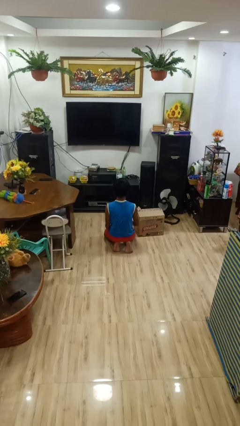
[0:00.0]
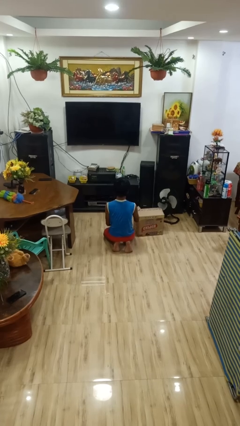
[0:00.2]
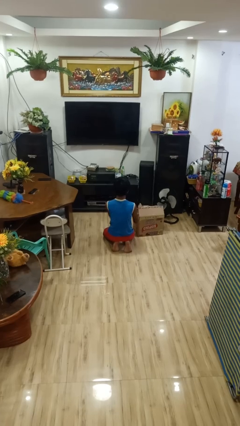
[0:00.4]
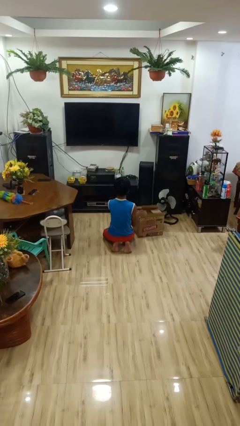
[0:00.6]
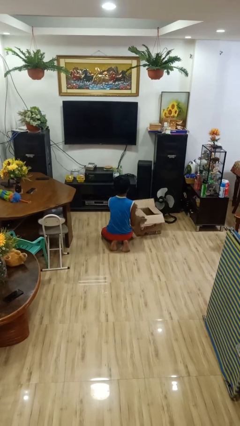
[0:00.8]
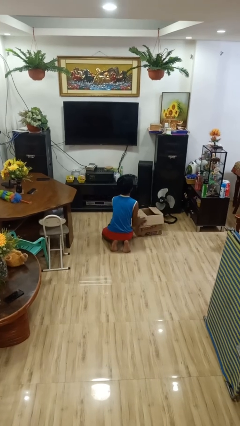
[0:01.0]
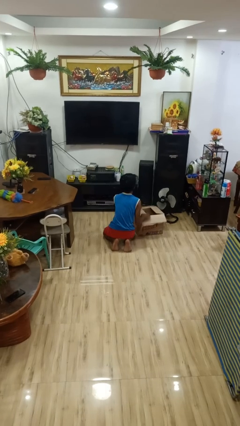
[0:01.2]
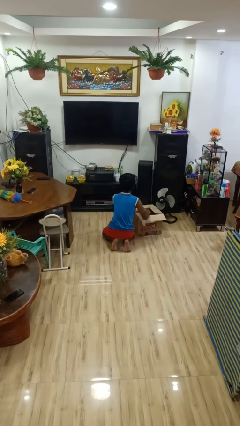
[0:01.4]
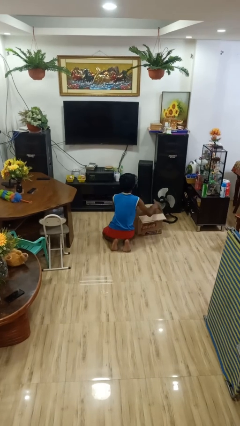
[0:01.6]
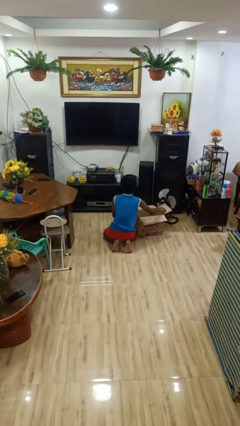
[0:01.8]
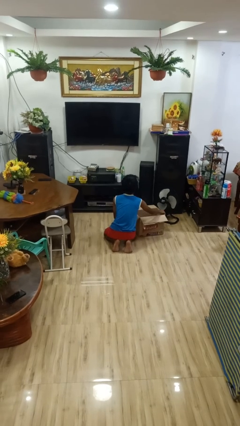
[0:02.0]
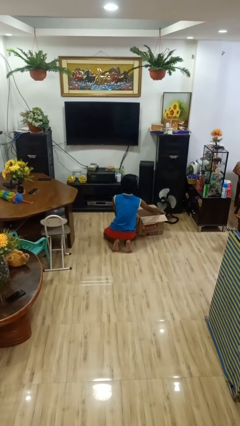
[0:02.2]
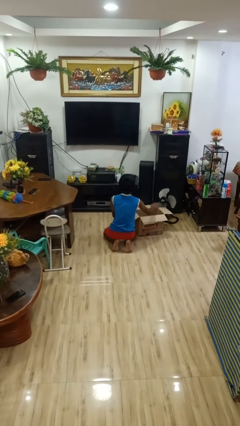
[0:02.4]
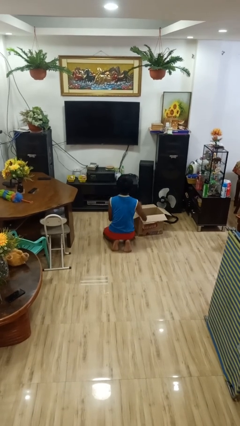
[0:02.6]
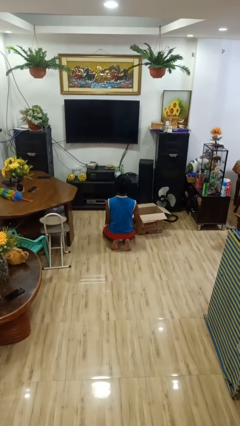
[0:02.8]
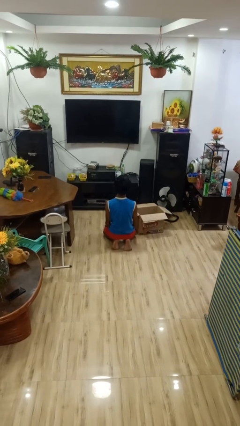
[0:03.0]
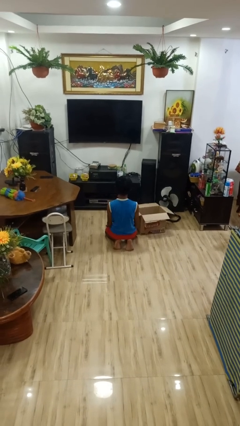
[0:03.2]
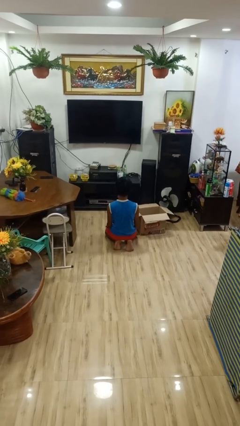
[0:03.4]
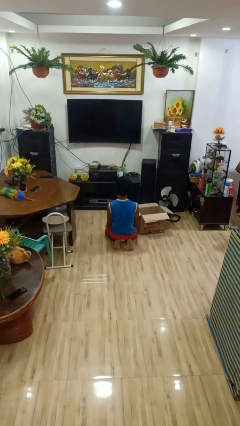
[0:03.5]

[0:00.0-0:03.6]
person opens box

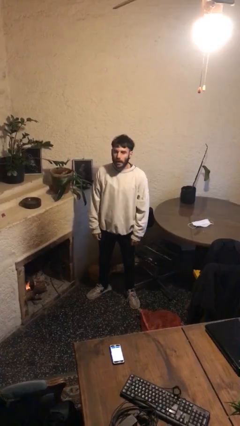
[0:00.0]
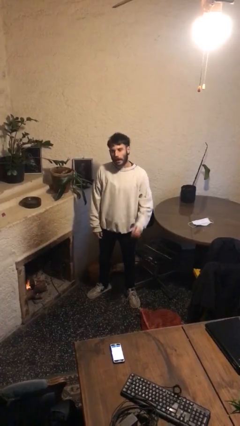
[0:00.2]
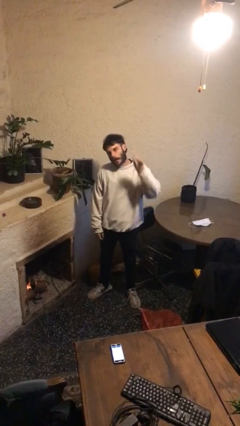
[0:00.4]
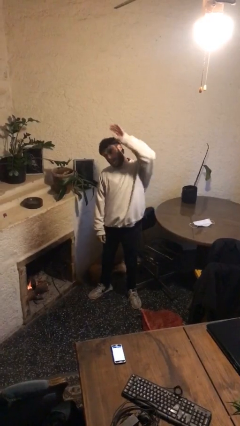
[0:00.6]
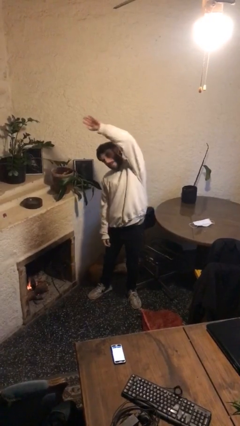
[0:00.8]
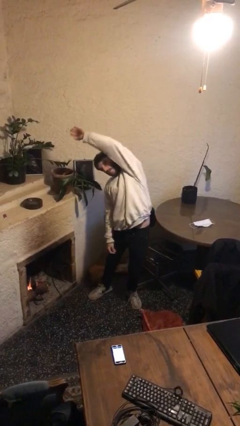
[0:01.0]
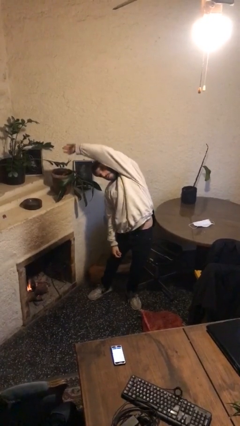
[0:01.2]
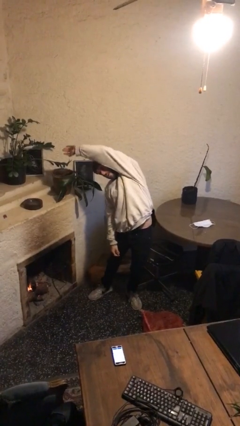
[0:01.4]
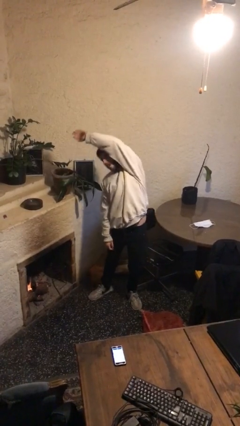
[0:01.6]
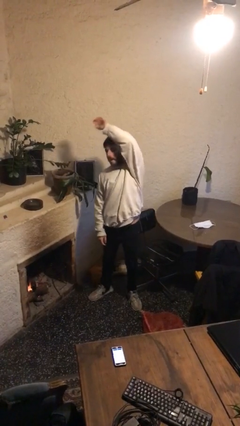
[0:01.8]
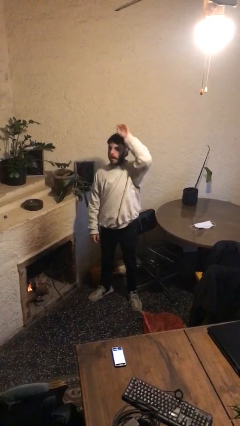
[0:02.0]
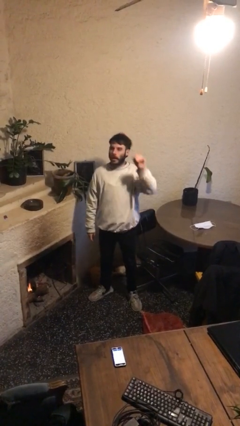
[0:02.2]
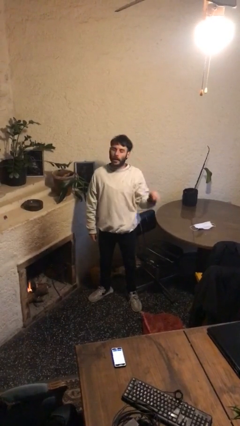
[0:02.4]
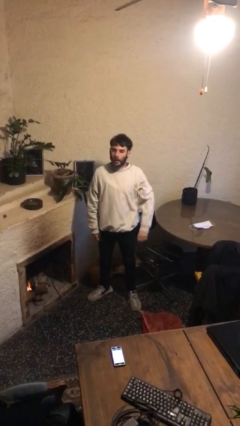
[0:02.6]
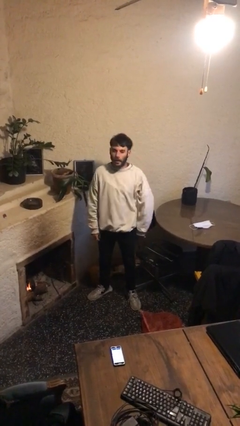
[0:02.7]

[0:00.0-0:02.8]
person stretches arms to side

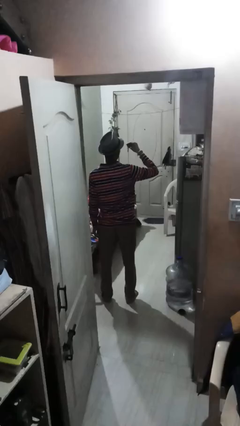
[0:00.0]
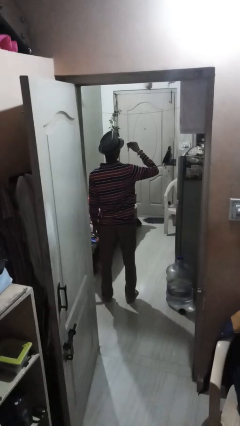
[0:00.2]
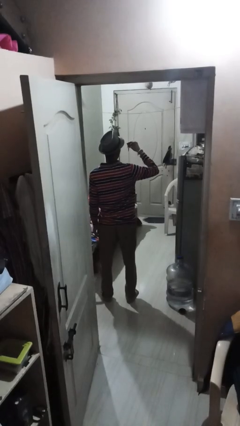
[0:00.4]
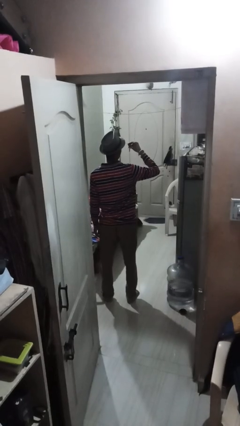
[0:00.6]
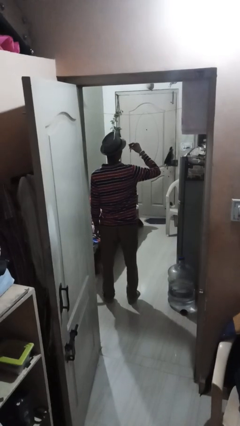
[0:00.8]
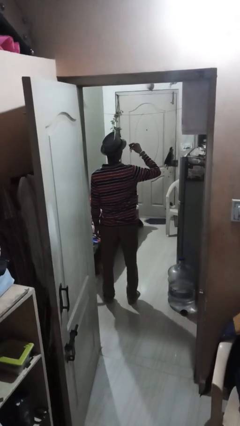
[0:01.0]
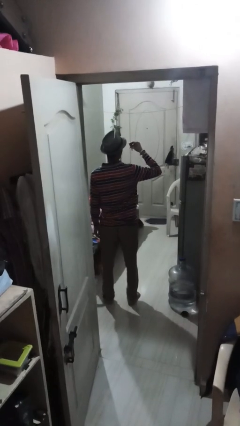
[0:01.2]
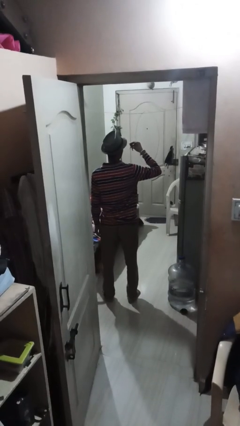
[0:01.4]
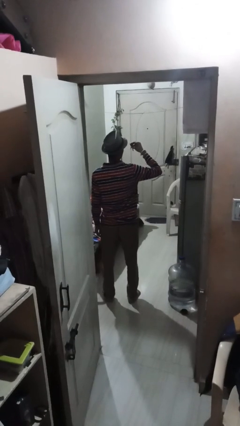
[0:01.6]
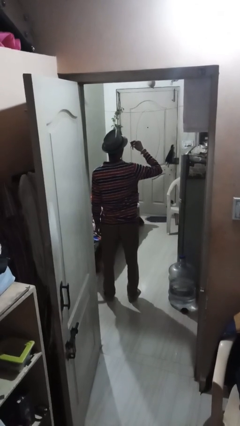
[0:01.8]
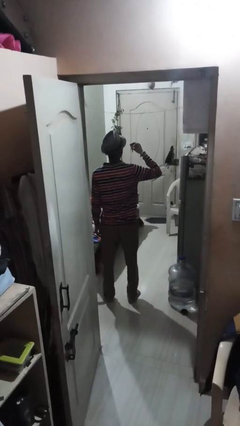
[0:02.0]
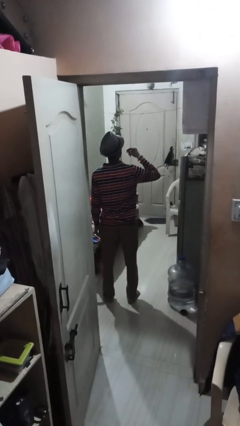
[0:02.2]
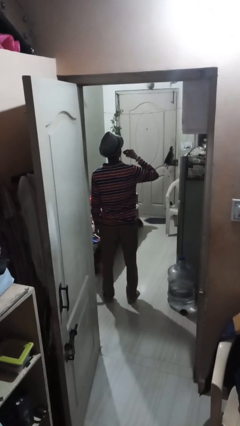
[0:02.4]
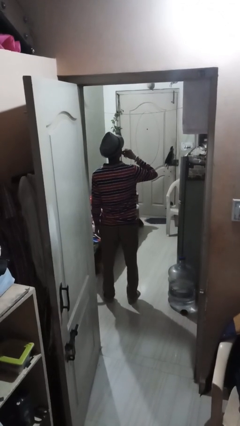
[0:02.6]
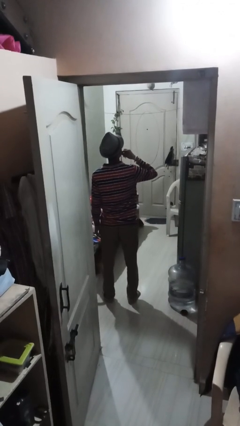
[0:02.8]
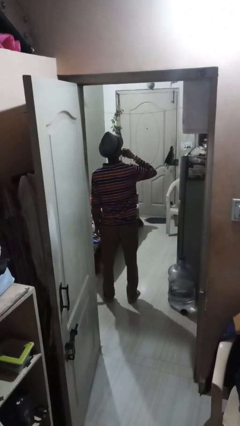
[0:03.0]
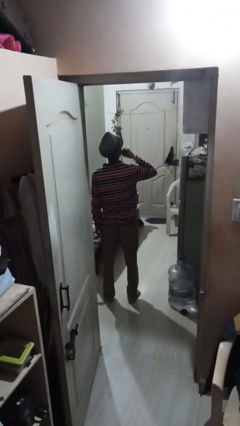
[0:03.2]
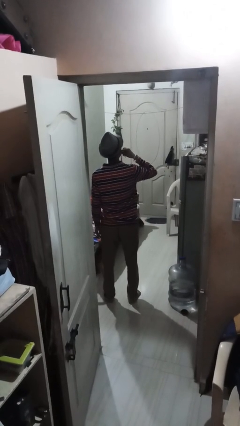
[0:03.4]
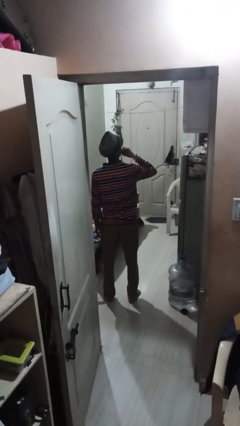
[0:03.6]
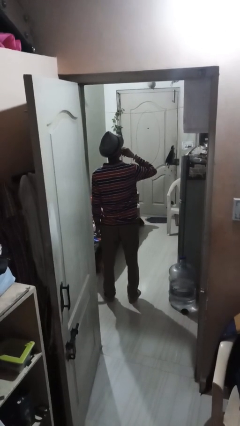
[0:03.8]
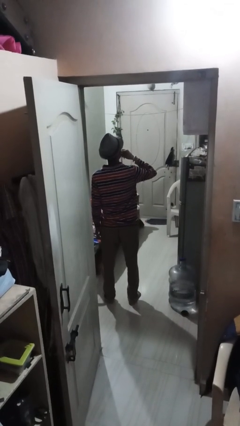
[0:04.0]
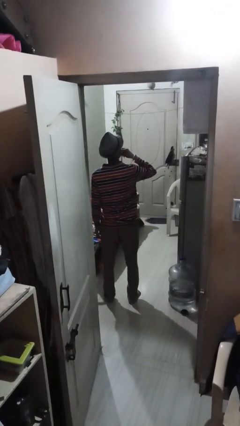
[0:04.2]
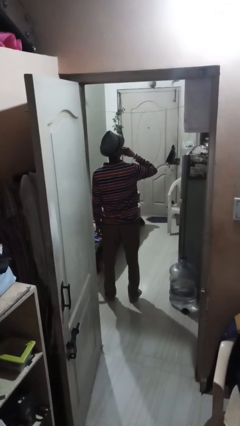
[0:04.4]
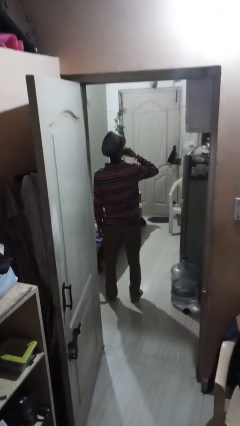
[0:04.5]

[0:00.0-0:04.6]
person flosses

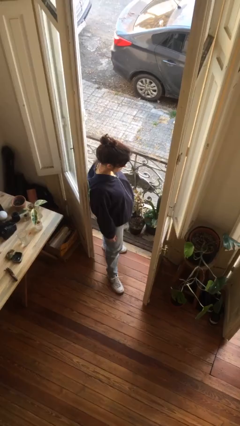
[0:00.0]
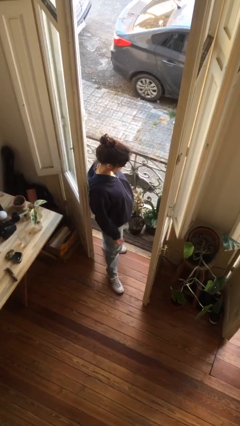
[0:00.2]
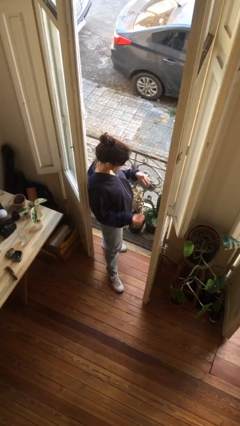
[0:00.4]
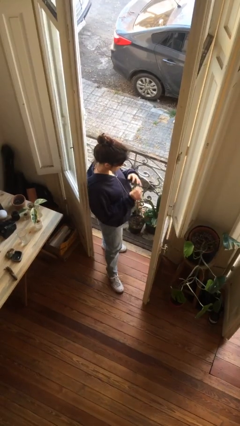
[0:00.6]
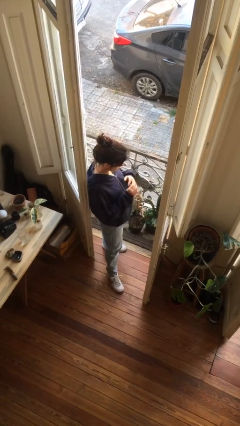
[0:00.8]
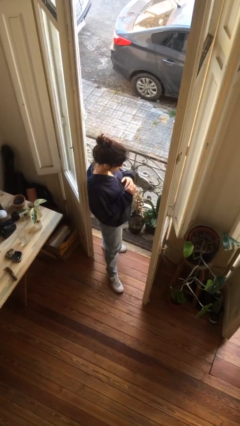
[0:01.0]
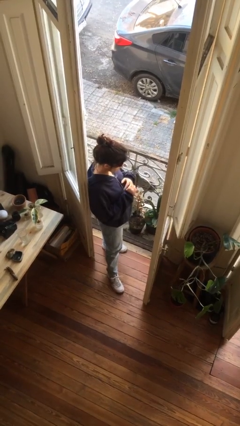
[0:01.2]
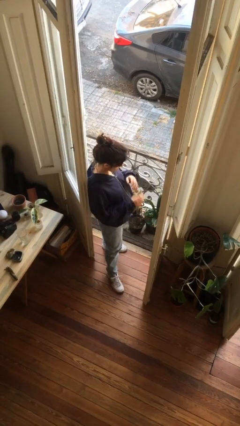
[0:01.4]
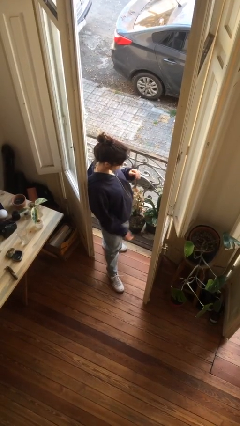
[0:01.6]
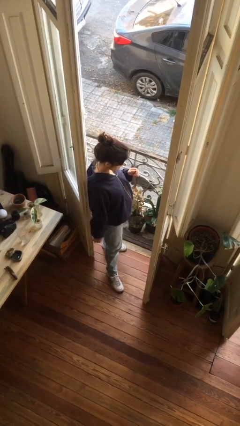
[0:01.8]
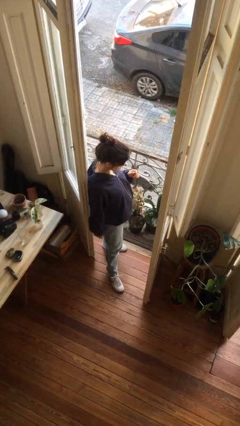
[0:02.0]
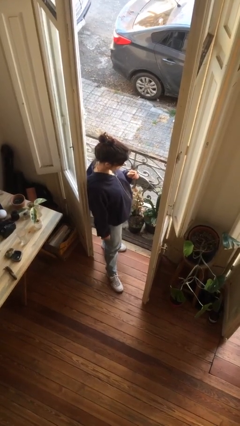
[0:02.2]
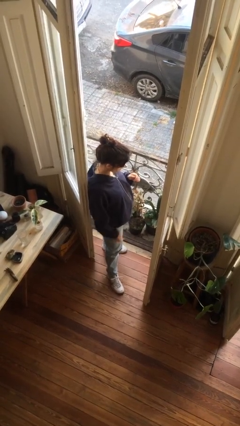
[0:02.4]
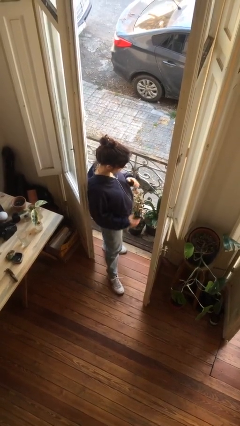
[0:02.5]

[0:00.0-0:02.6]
person puts on ring

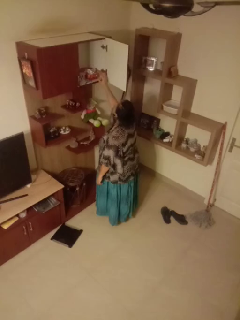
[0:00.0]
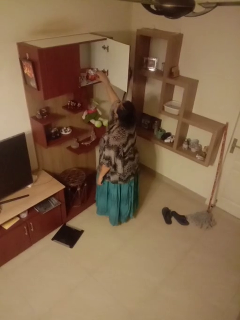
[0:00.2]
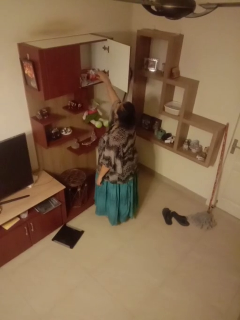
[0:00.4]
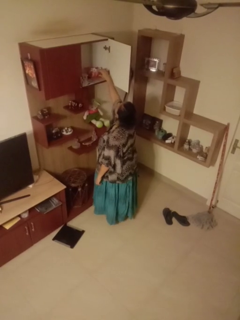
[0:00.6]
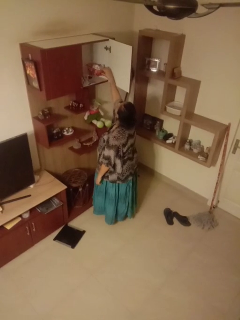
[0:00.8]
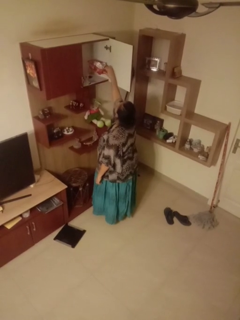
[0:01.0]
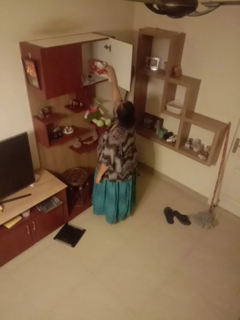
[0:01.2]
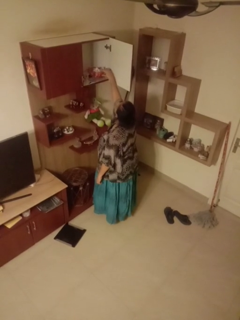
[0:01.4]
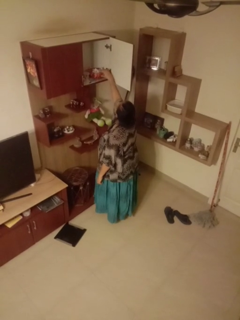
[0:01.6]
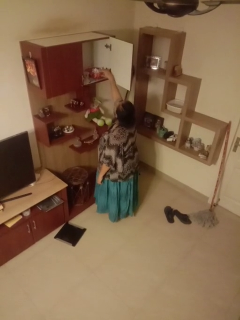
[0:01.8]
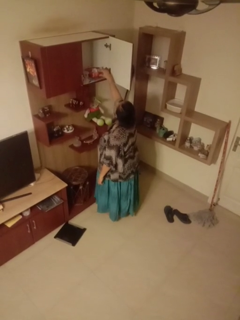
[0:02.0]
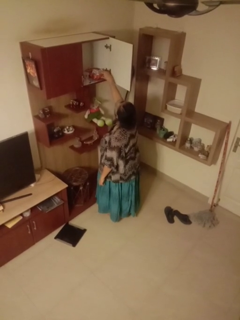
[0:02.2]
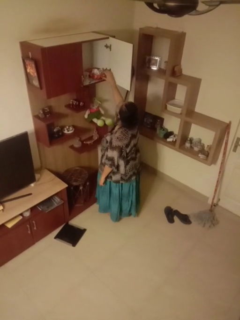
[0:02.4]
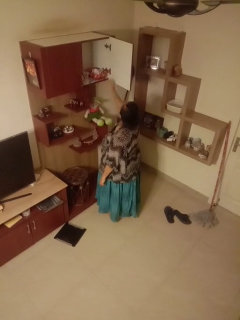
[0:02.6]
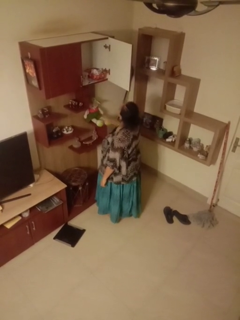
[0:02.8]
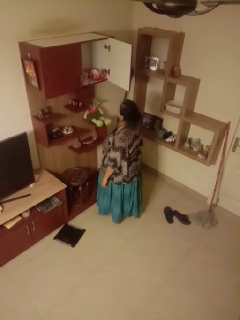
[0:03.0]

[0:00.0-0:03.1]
person searches in cabinet

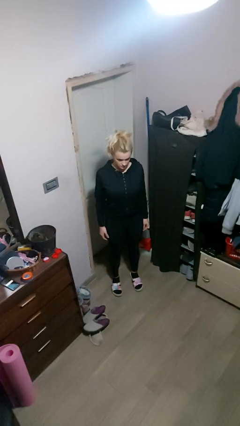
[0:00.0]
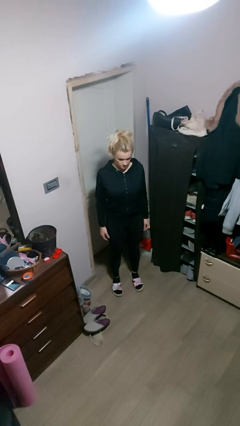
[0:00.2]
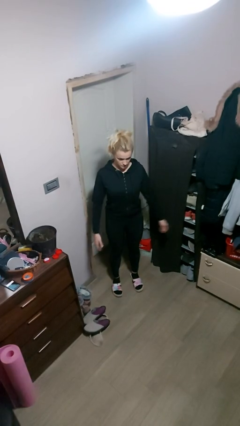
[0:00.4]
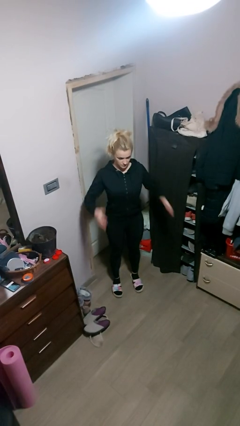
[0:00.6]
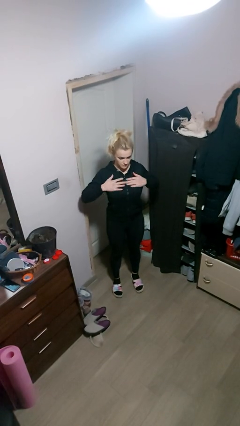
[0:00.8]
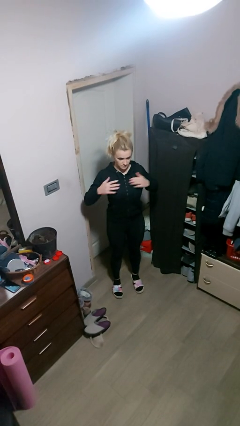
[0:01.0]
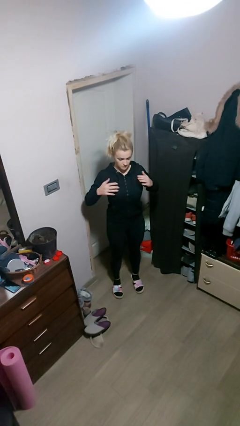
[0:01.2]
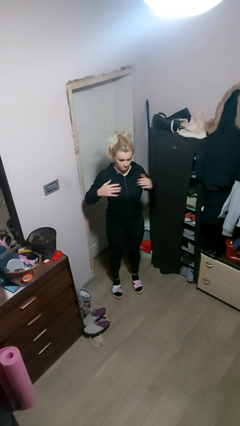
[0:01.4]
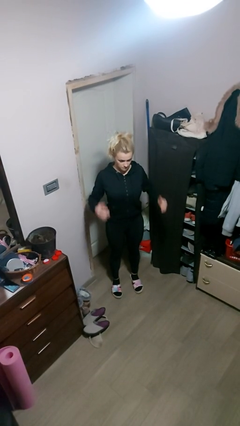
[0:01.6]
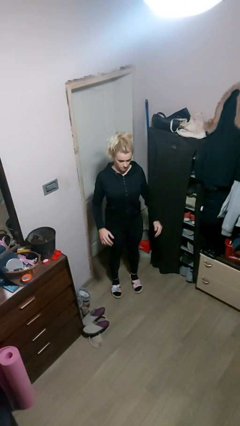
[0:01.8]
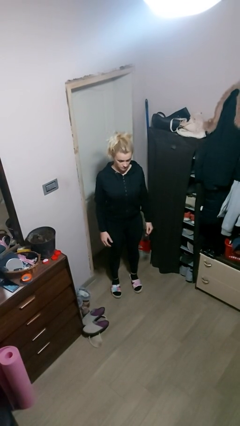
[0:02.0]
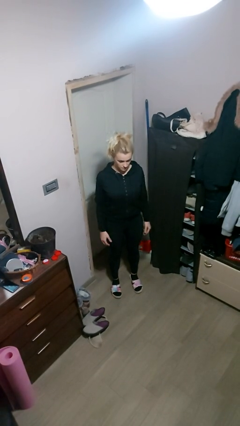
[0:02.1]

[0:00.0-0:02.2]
person drums on chest
